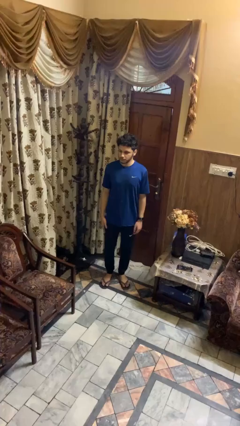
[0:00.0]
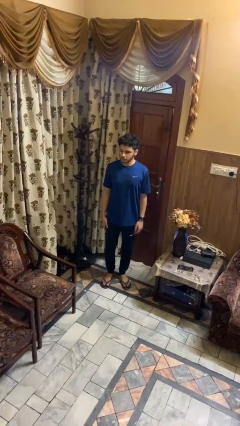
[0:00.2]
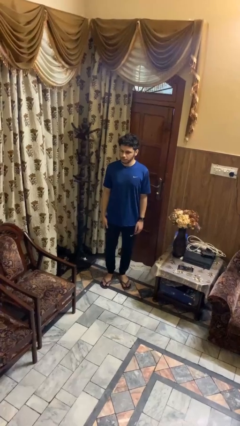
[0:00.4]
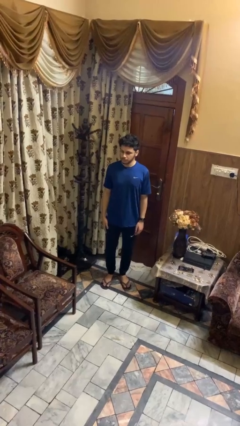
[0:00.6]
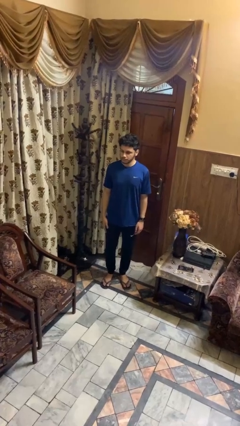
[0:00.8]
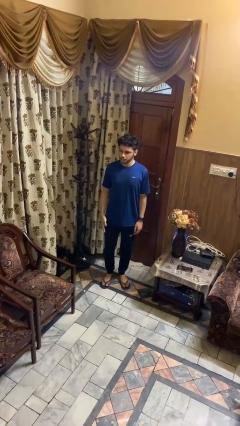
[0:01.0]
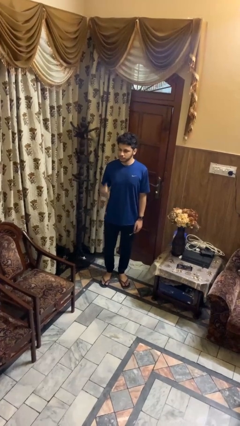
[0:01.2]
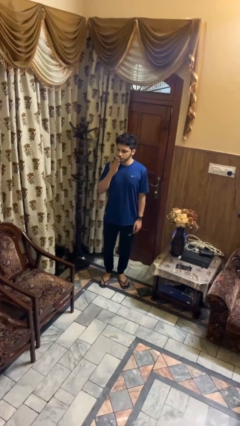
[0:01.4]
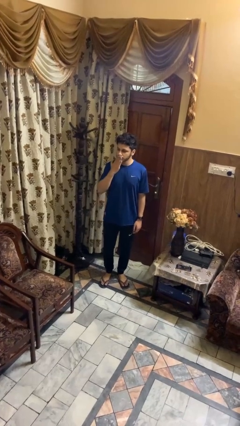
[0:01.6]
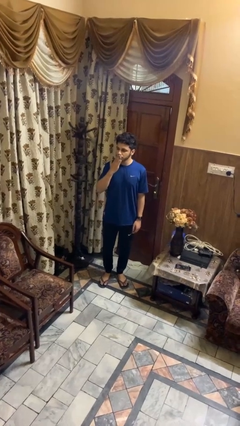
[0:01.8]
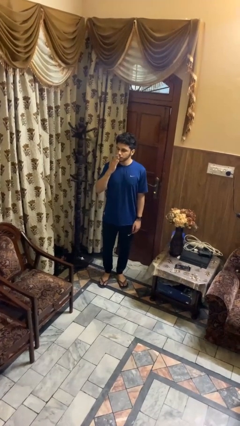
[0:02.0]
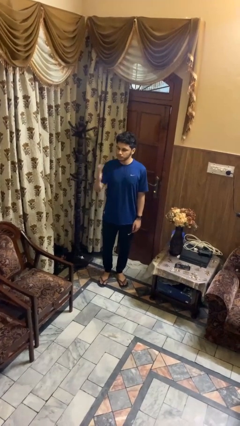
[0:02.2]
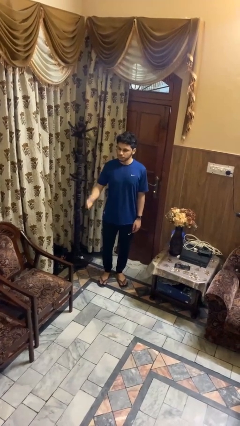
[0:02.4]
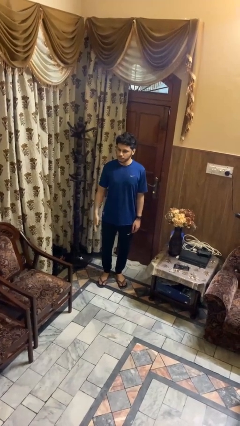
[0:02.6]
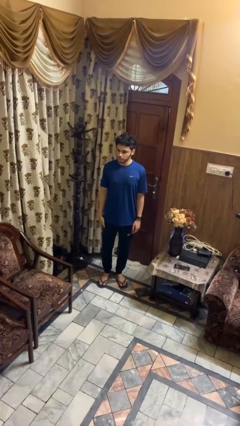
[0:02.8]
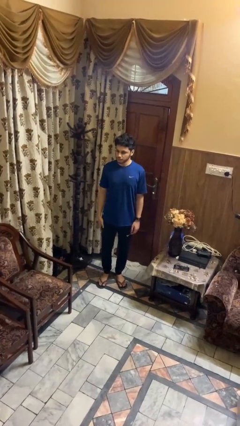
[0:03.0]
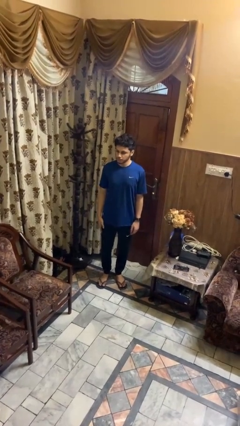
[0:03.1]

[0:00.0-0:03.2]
person gestures blow kiss

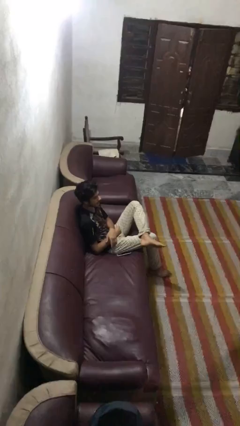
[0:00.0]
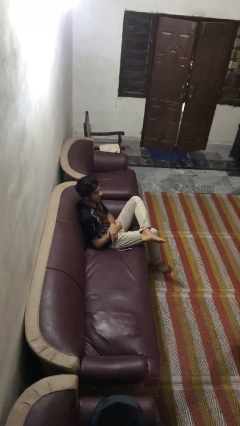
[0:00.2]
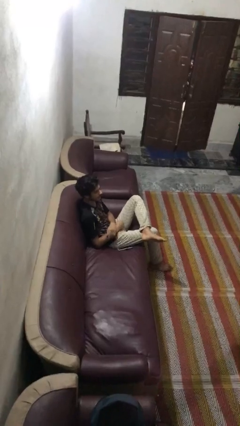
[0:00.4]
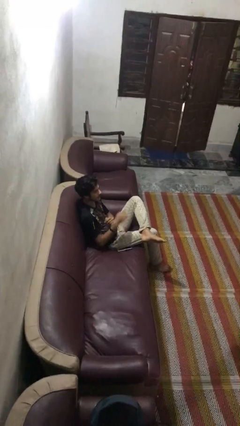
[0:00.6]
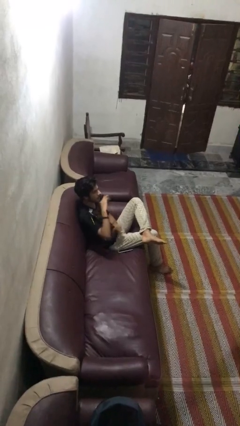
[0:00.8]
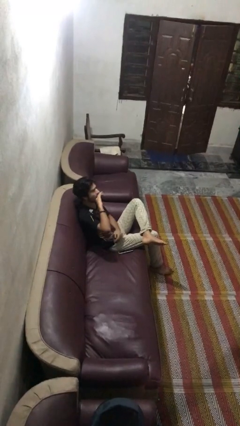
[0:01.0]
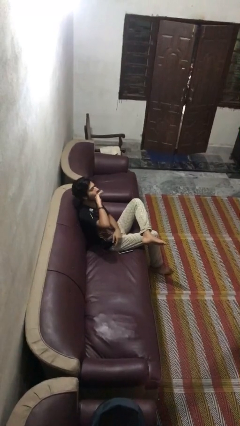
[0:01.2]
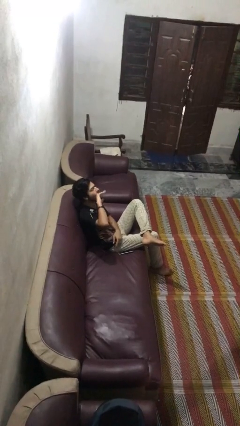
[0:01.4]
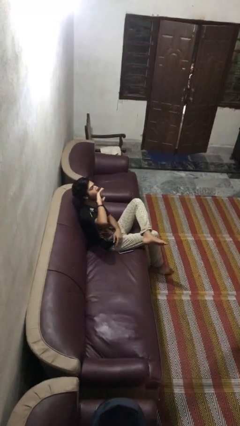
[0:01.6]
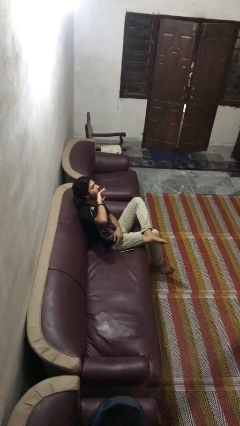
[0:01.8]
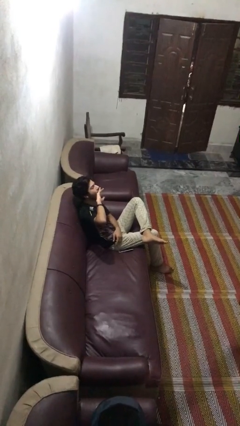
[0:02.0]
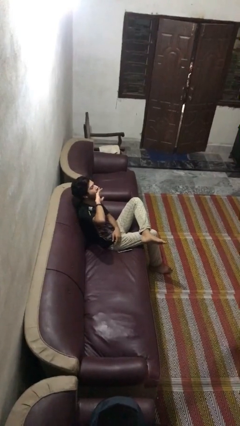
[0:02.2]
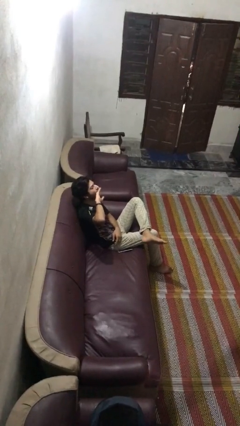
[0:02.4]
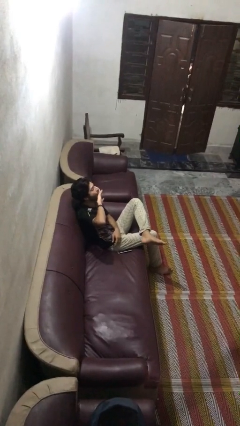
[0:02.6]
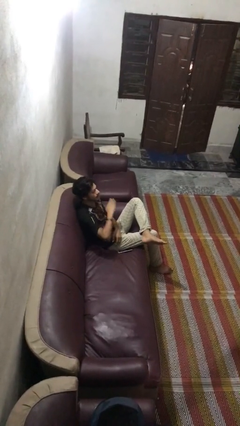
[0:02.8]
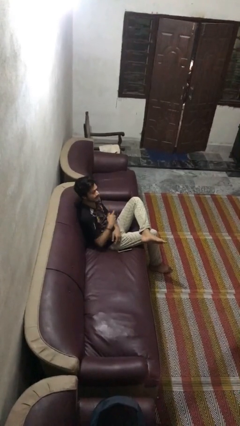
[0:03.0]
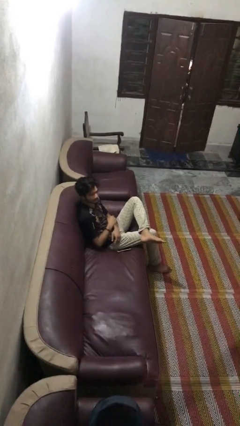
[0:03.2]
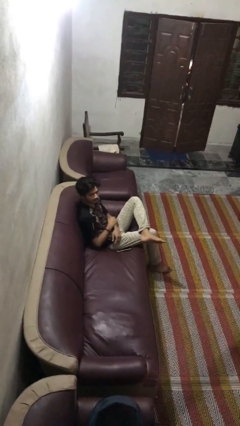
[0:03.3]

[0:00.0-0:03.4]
person yawns

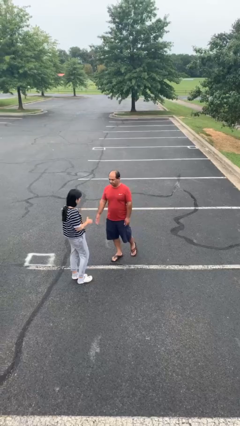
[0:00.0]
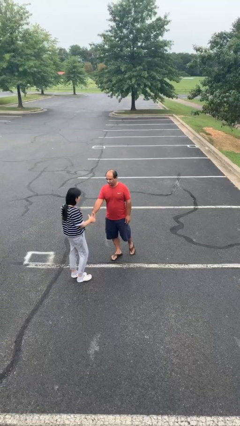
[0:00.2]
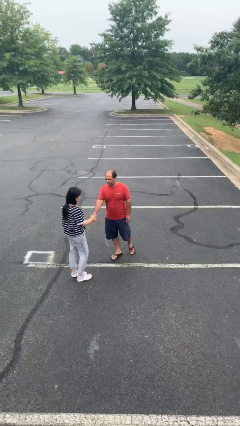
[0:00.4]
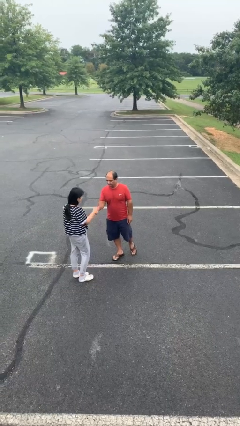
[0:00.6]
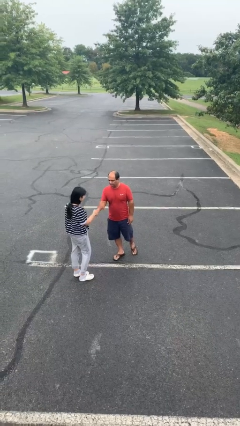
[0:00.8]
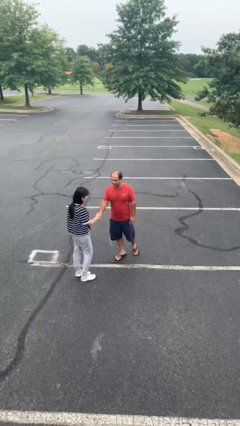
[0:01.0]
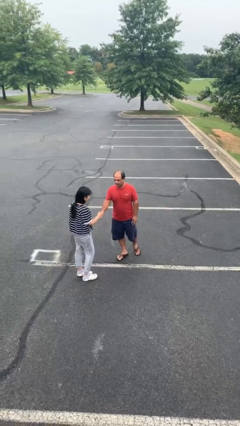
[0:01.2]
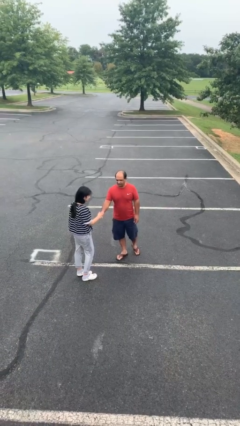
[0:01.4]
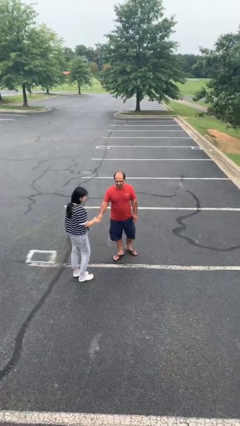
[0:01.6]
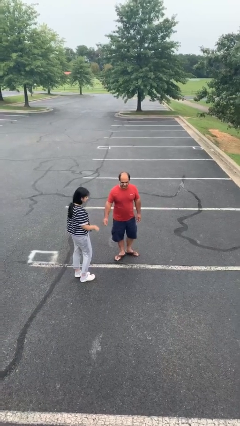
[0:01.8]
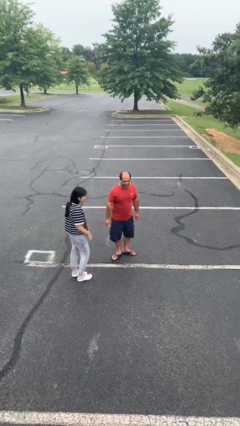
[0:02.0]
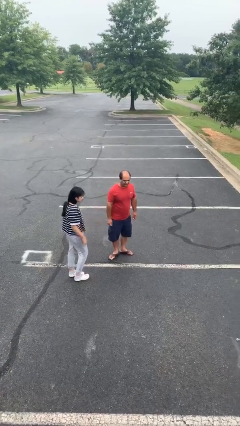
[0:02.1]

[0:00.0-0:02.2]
person shakes hand

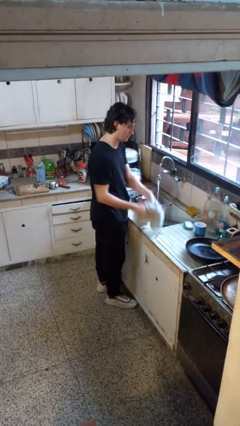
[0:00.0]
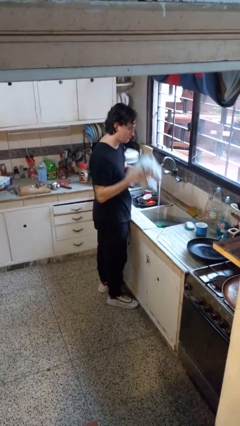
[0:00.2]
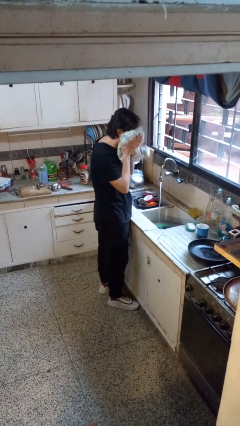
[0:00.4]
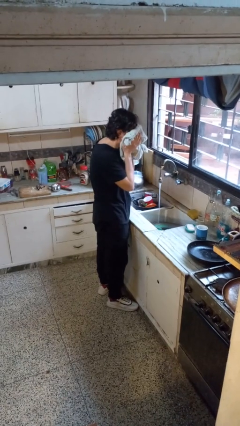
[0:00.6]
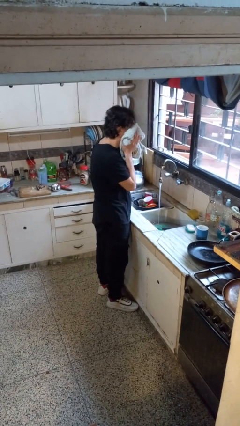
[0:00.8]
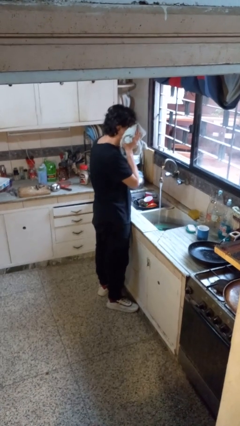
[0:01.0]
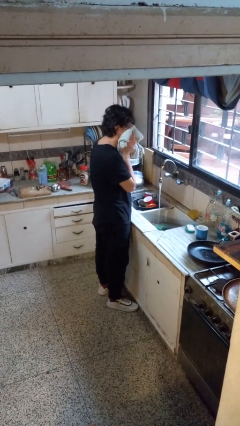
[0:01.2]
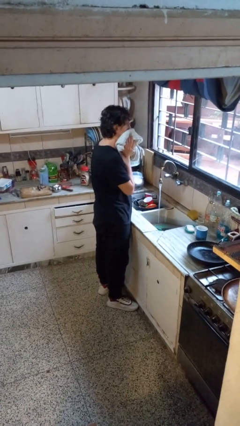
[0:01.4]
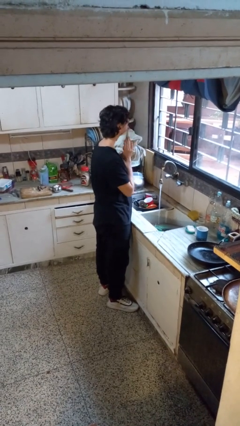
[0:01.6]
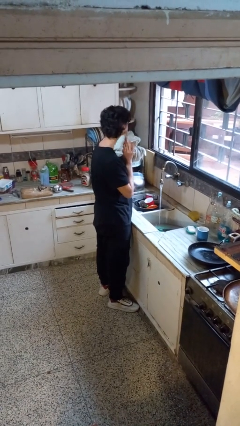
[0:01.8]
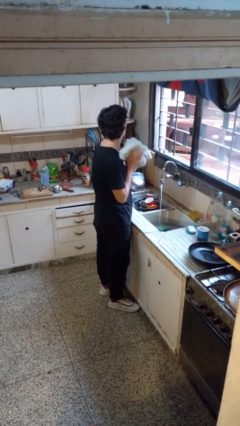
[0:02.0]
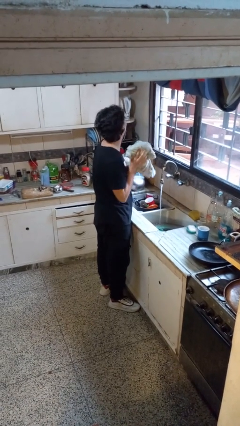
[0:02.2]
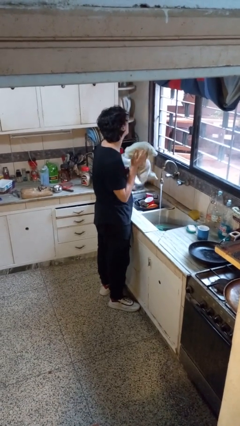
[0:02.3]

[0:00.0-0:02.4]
person dries face with towel

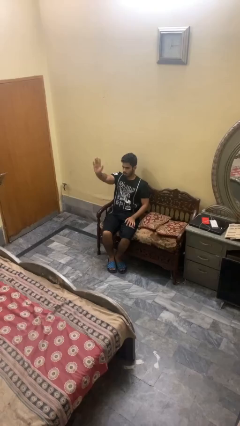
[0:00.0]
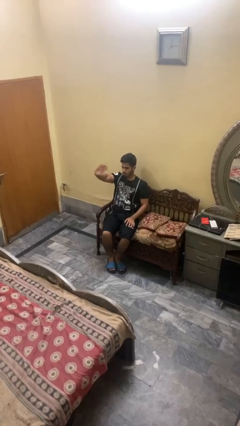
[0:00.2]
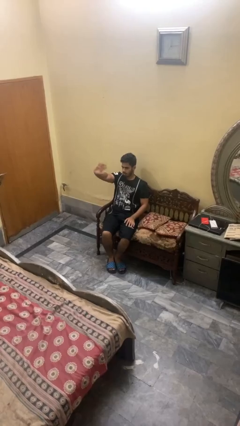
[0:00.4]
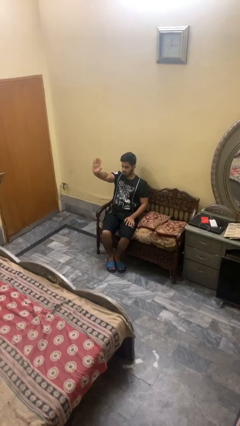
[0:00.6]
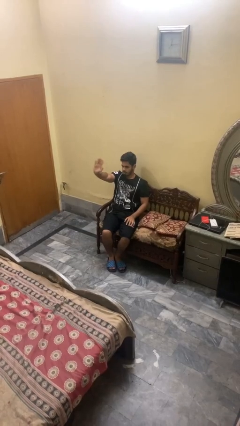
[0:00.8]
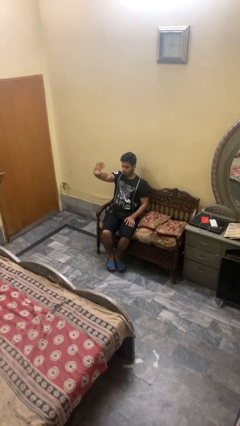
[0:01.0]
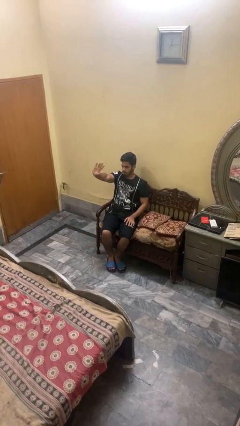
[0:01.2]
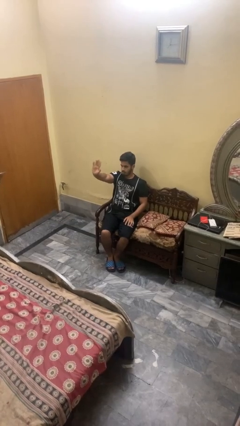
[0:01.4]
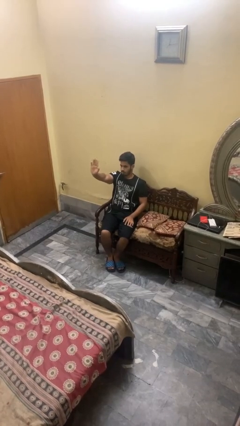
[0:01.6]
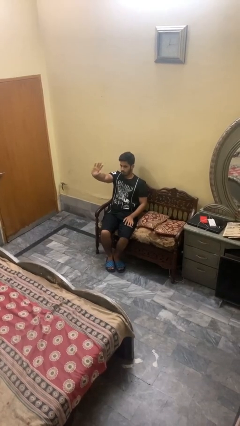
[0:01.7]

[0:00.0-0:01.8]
person waves at person

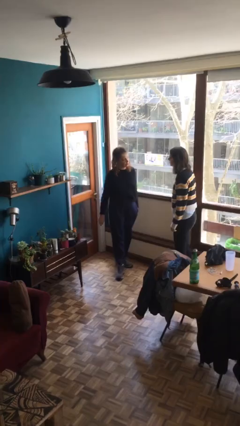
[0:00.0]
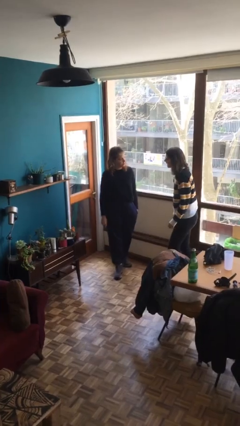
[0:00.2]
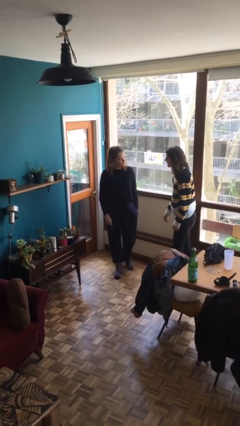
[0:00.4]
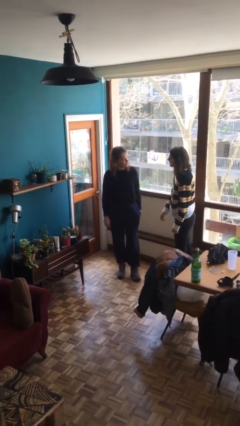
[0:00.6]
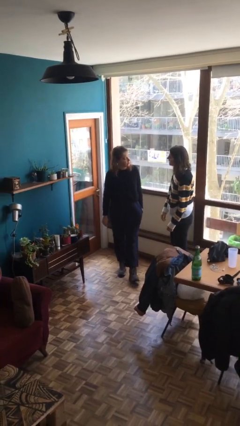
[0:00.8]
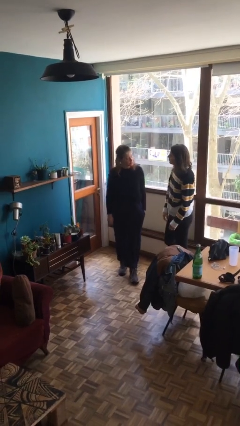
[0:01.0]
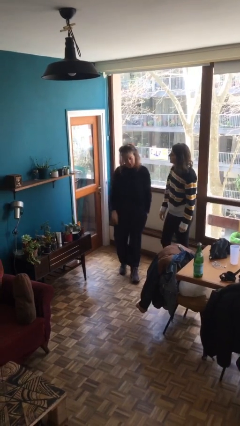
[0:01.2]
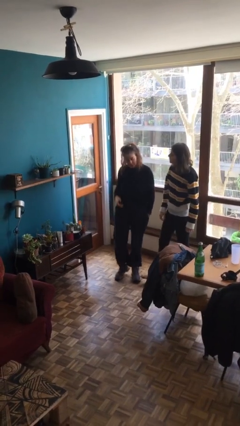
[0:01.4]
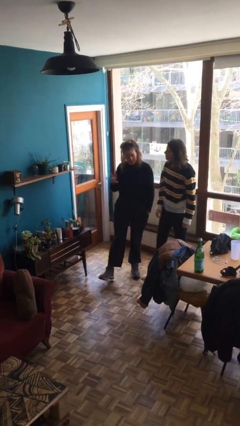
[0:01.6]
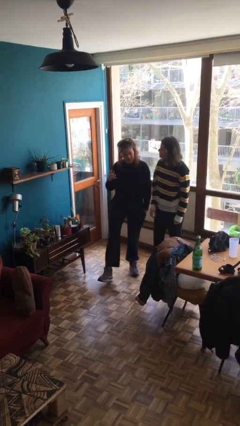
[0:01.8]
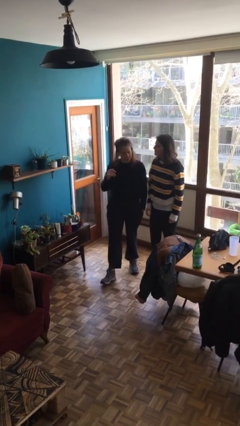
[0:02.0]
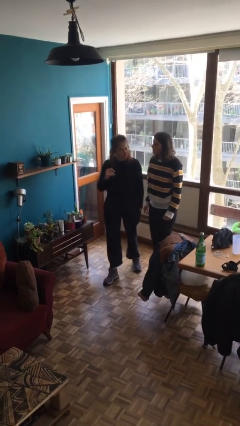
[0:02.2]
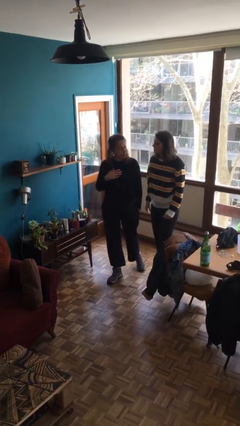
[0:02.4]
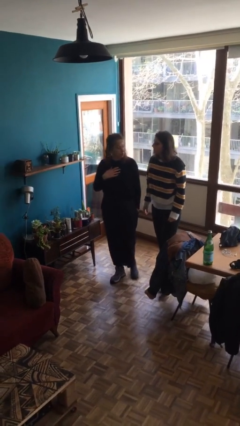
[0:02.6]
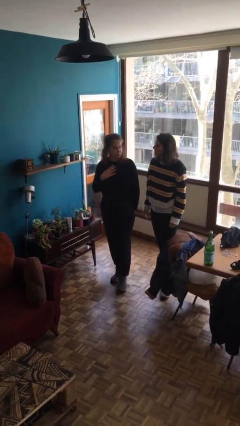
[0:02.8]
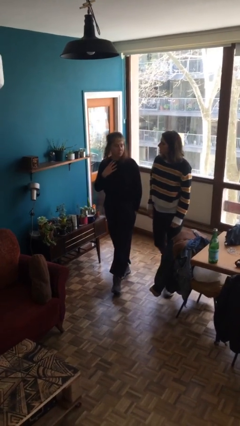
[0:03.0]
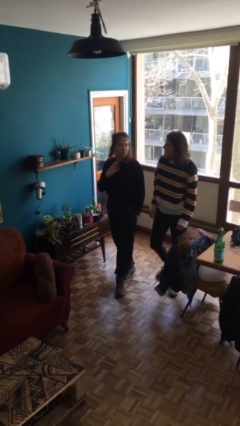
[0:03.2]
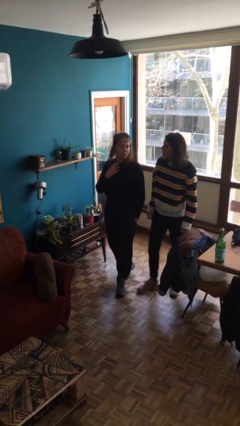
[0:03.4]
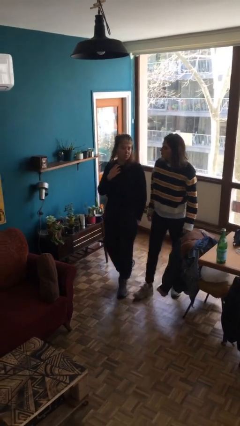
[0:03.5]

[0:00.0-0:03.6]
person talks to person

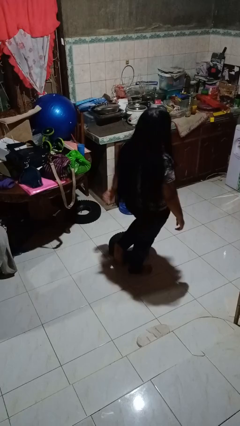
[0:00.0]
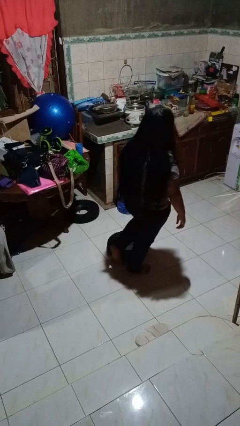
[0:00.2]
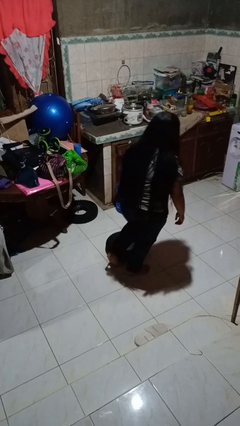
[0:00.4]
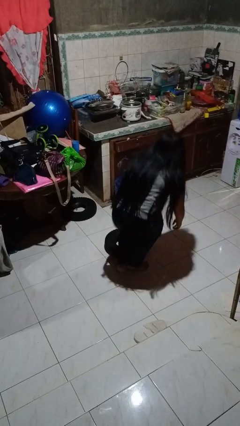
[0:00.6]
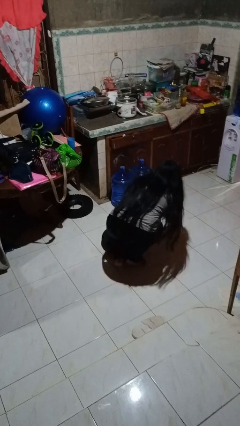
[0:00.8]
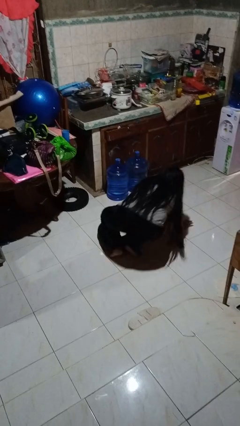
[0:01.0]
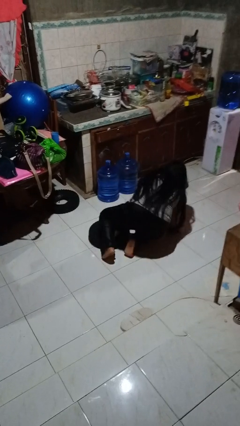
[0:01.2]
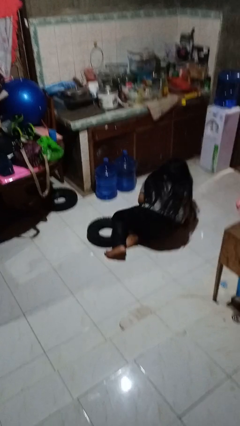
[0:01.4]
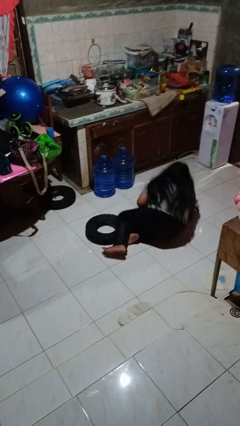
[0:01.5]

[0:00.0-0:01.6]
person trips on object on floor
